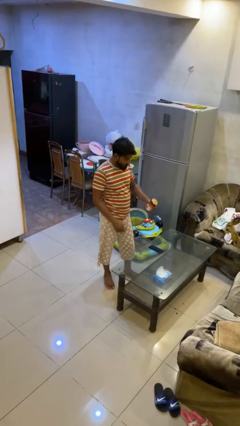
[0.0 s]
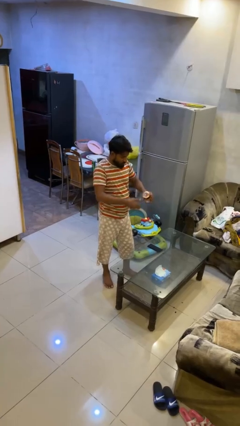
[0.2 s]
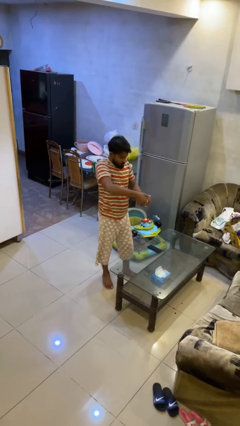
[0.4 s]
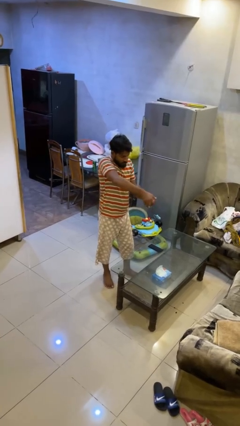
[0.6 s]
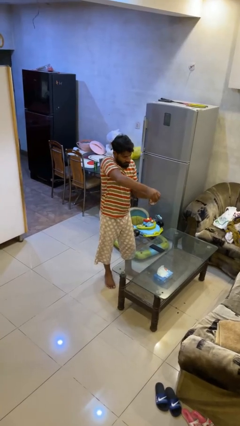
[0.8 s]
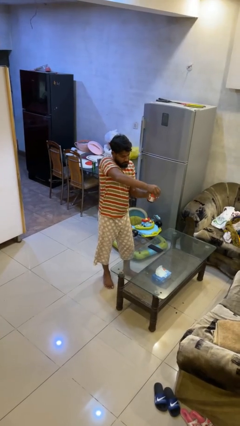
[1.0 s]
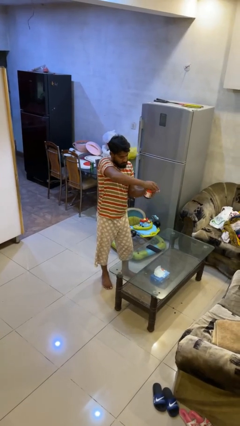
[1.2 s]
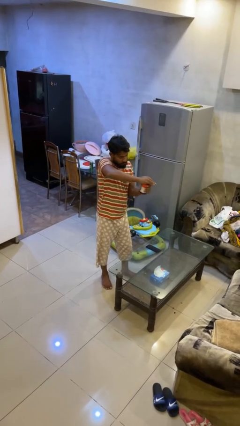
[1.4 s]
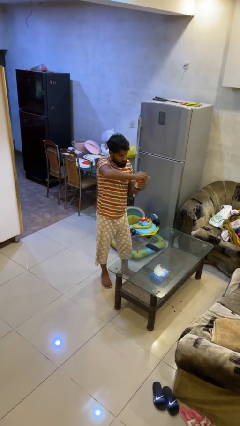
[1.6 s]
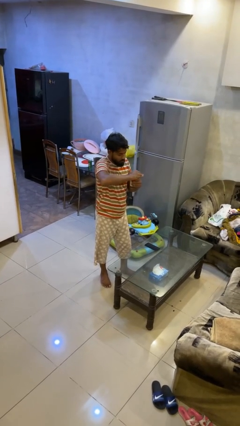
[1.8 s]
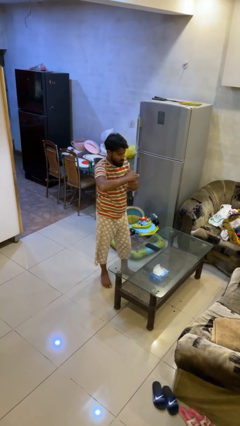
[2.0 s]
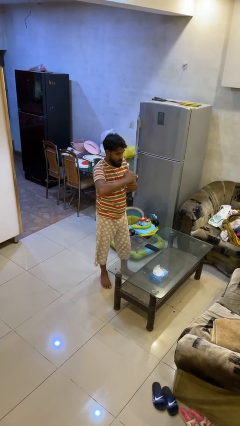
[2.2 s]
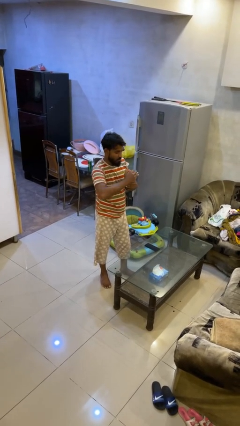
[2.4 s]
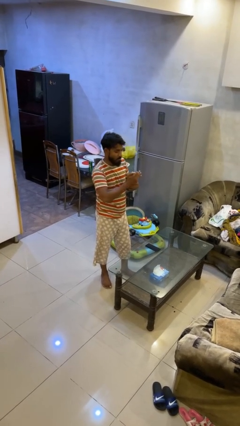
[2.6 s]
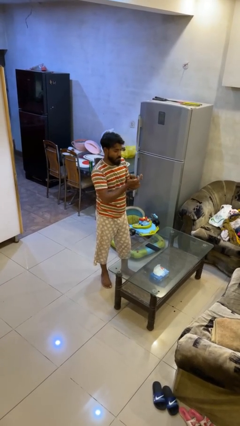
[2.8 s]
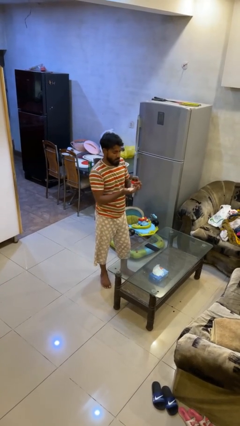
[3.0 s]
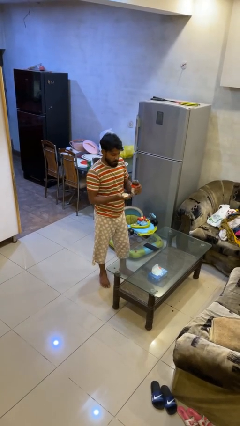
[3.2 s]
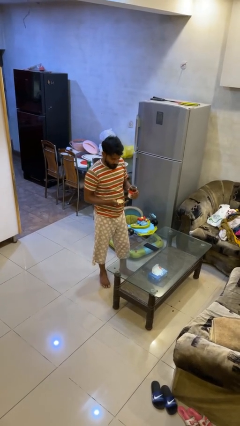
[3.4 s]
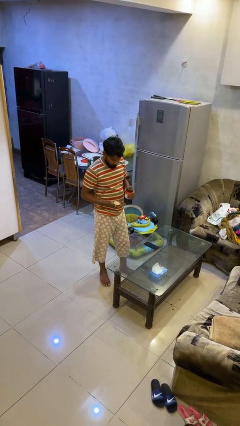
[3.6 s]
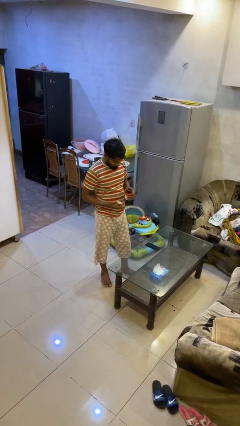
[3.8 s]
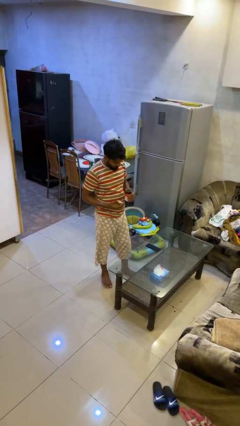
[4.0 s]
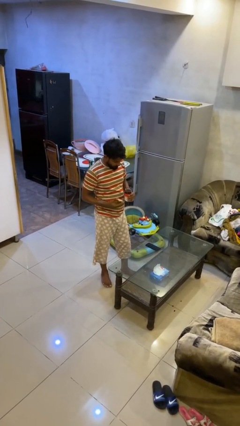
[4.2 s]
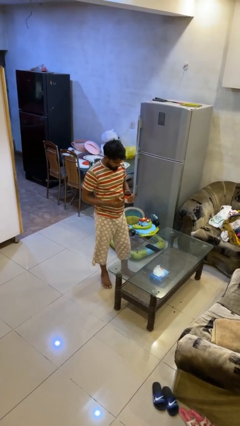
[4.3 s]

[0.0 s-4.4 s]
person opens jar

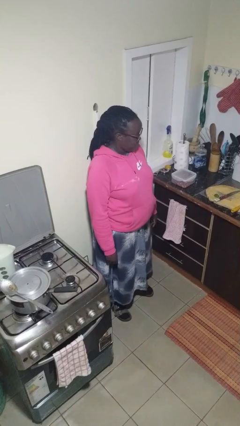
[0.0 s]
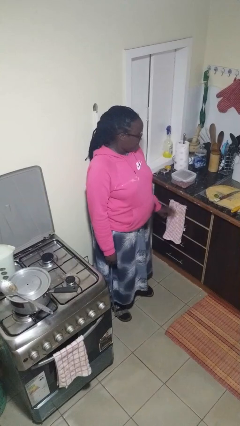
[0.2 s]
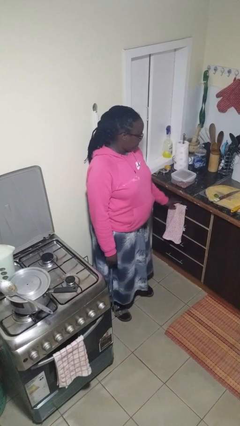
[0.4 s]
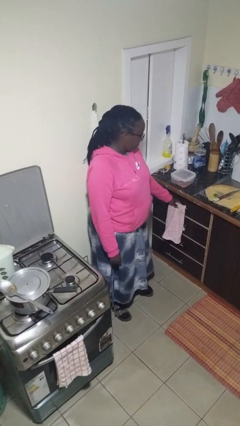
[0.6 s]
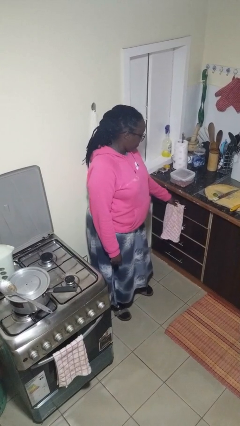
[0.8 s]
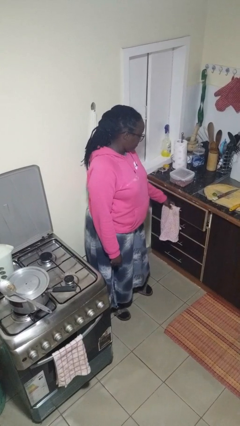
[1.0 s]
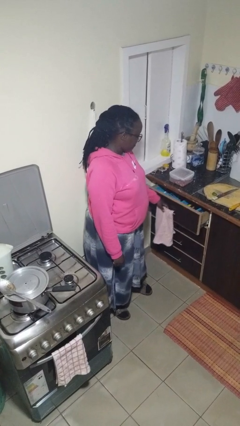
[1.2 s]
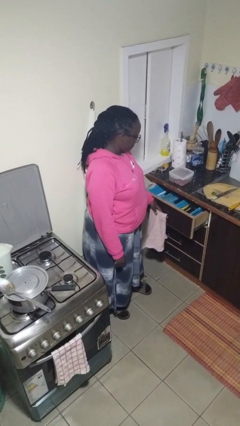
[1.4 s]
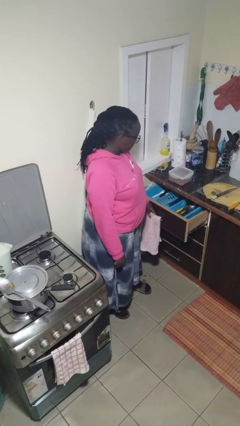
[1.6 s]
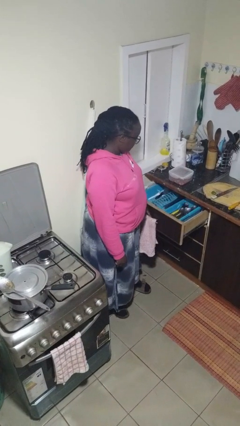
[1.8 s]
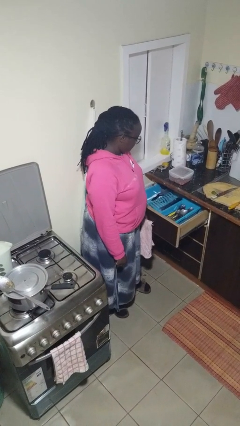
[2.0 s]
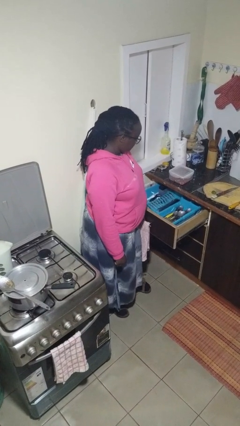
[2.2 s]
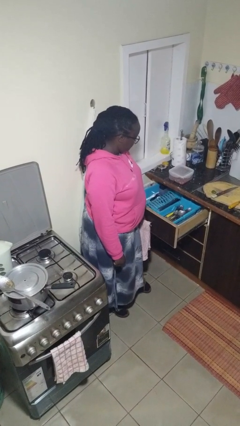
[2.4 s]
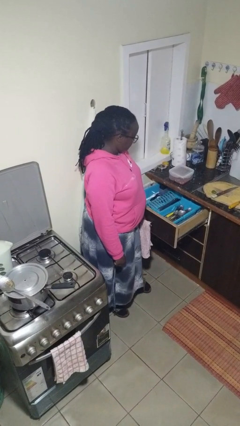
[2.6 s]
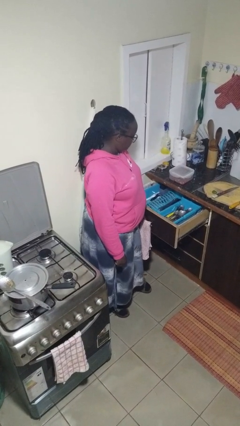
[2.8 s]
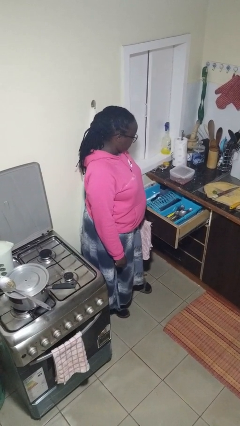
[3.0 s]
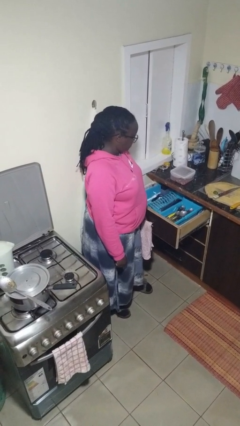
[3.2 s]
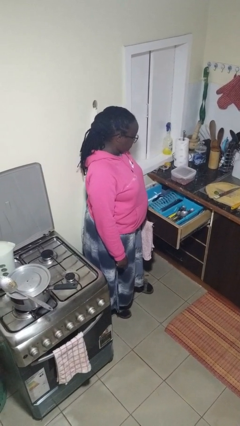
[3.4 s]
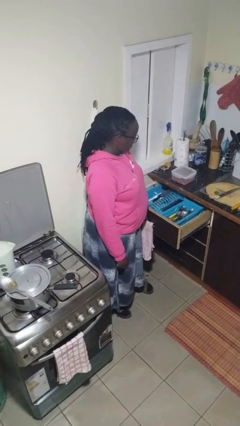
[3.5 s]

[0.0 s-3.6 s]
person opens kitchen drawer

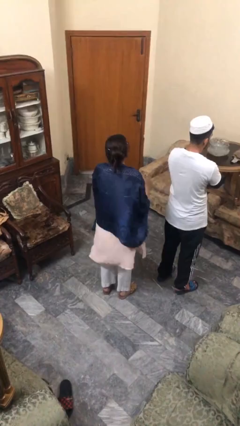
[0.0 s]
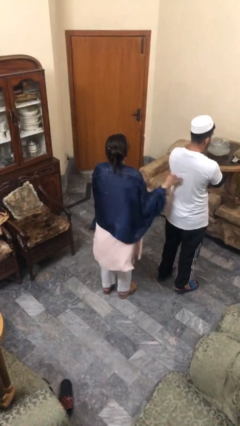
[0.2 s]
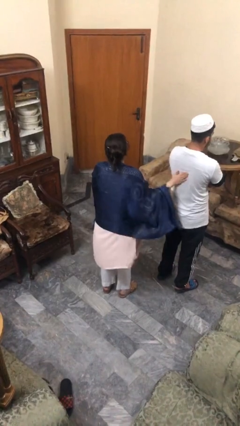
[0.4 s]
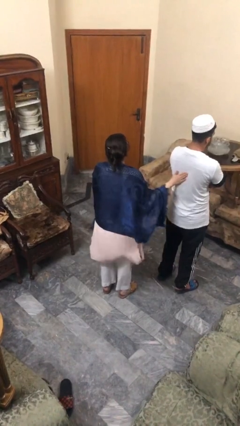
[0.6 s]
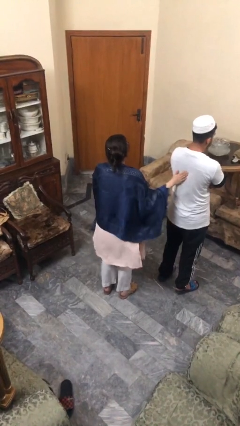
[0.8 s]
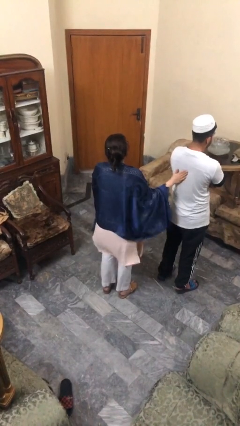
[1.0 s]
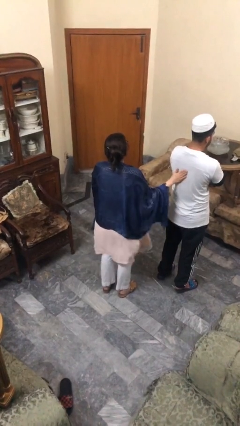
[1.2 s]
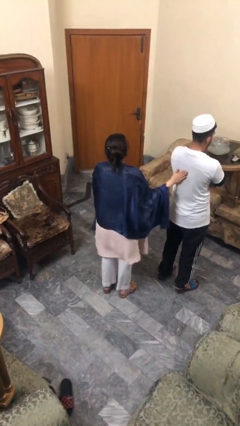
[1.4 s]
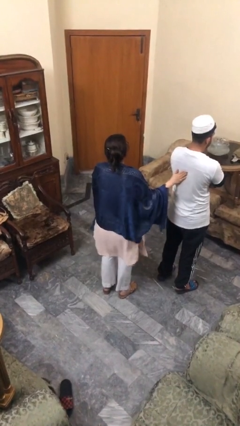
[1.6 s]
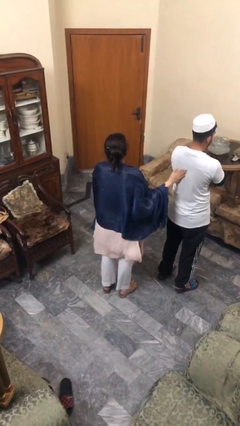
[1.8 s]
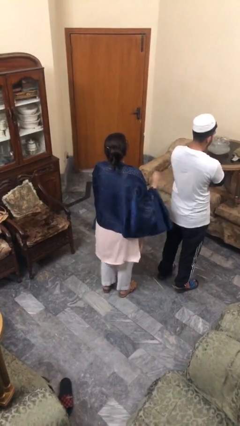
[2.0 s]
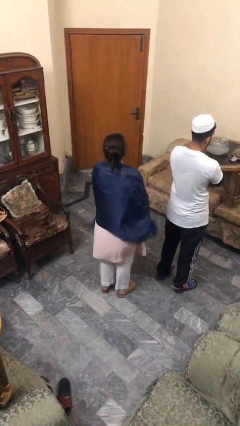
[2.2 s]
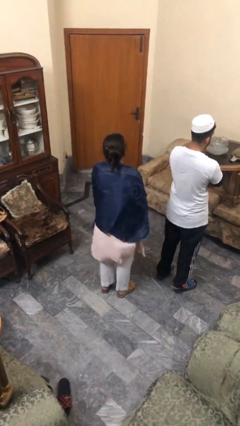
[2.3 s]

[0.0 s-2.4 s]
person touches back of person

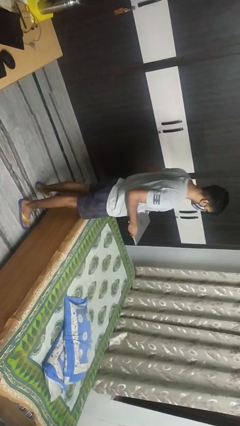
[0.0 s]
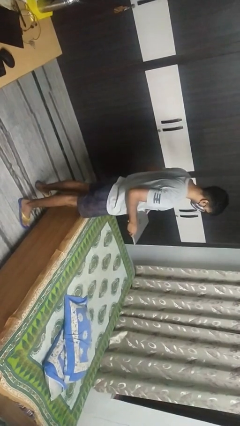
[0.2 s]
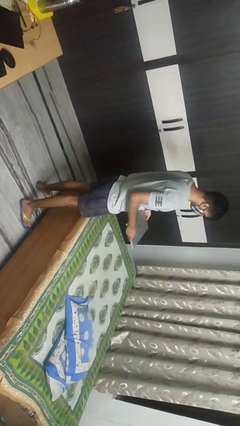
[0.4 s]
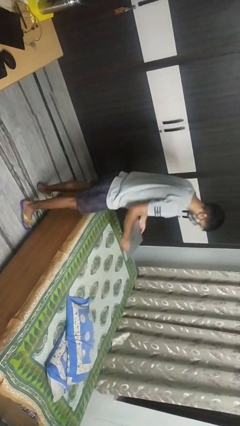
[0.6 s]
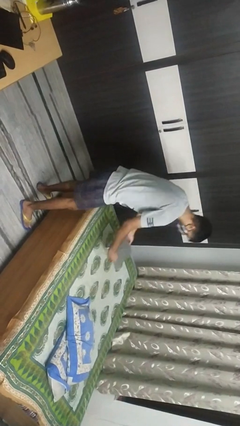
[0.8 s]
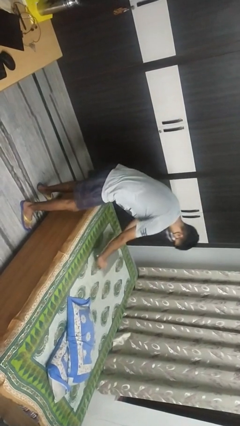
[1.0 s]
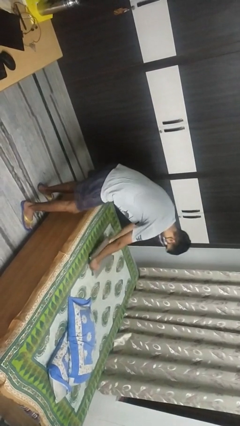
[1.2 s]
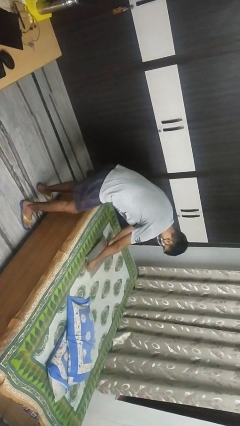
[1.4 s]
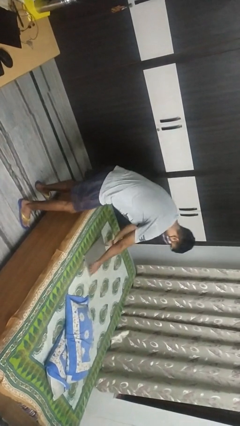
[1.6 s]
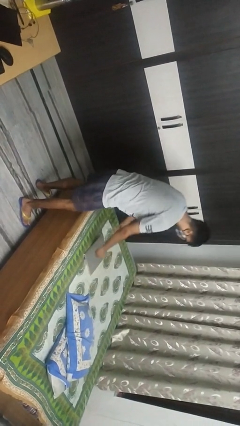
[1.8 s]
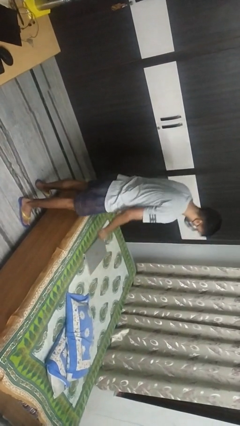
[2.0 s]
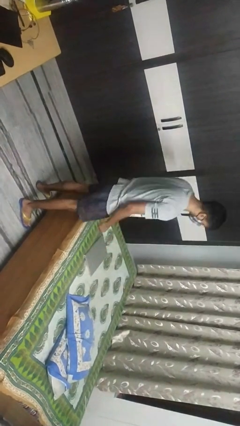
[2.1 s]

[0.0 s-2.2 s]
person puts down object on bed

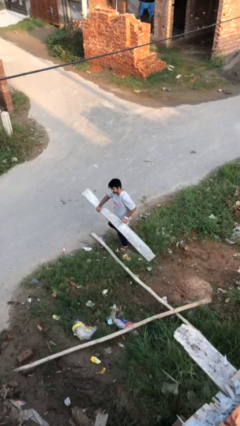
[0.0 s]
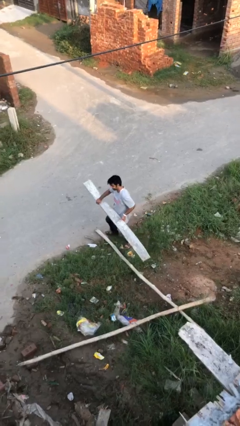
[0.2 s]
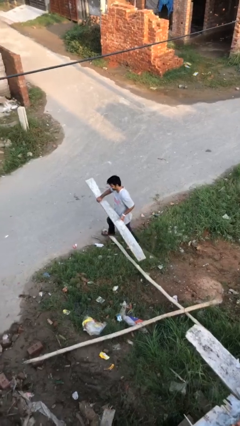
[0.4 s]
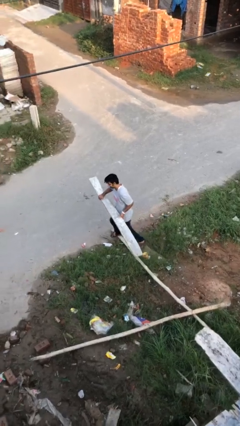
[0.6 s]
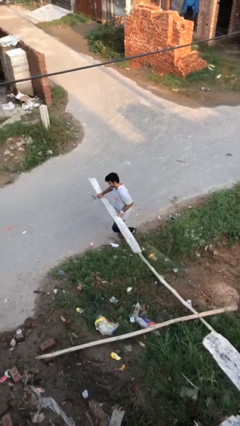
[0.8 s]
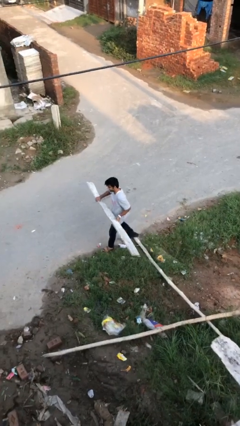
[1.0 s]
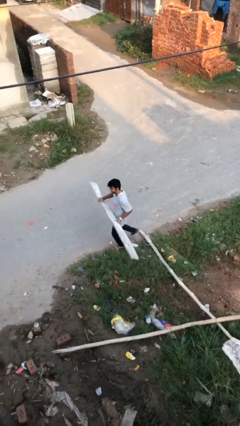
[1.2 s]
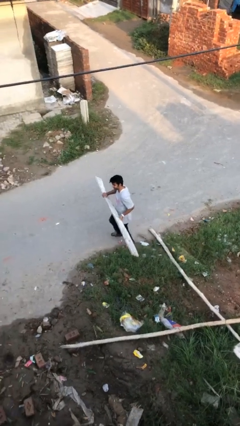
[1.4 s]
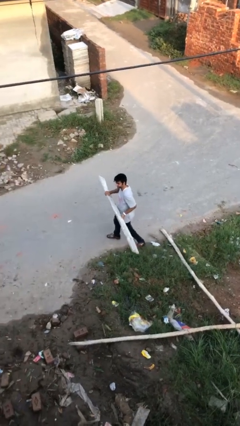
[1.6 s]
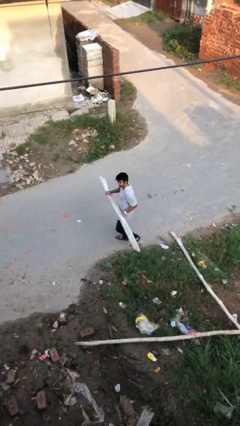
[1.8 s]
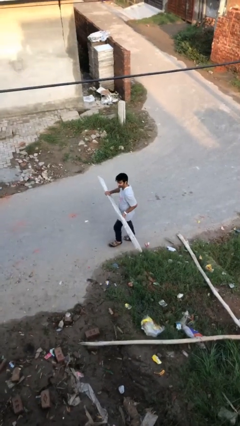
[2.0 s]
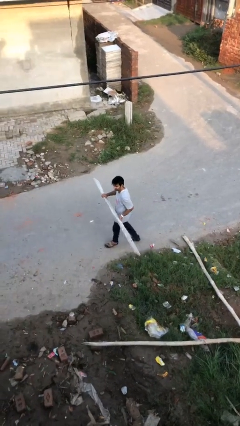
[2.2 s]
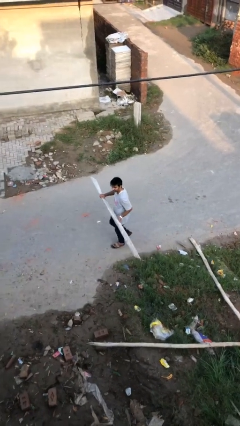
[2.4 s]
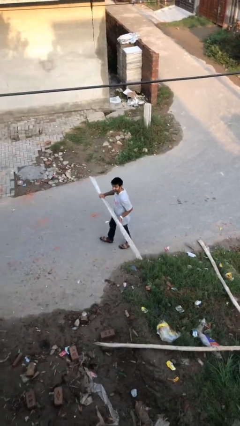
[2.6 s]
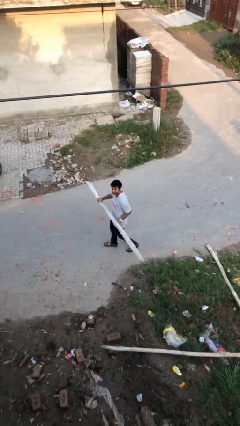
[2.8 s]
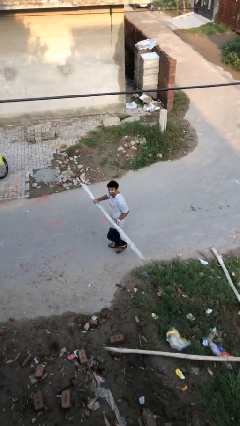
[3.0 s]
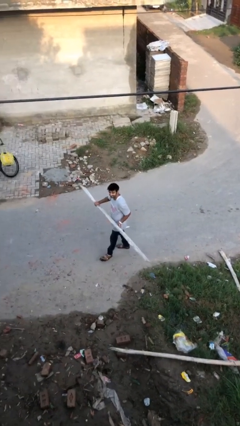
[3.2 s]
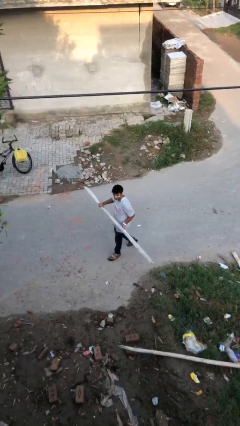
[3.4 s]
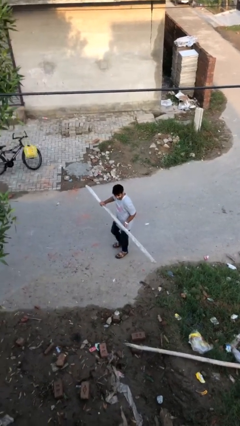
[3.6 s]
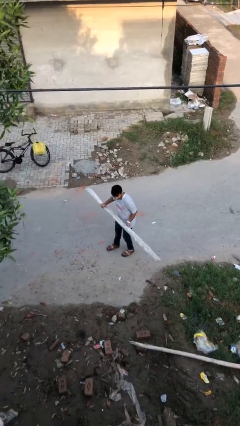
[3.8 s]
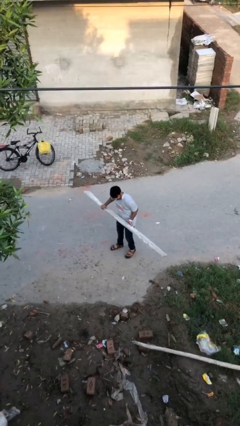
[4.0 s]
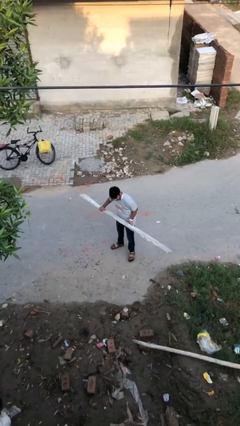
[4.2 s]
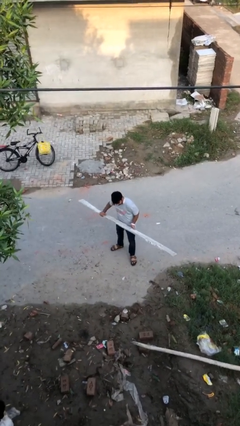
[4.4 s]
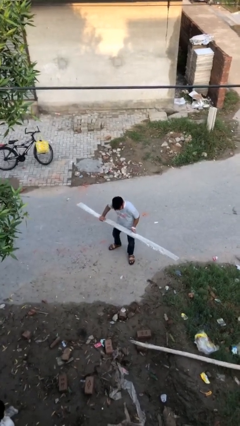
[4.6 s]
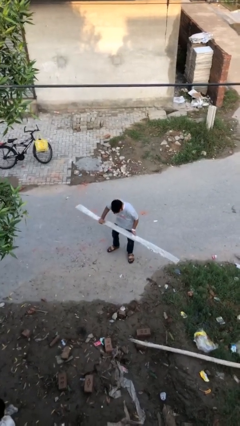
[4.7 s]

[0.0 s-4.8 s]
person carries heavy object
